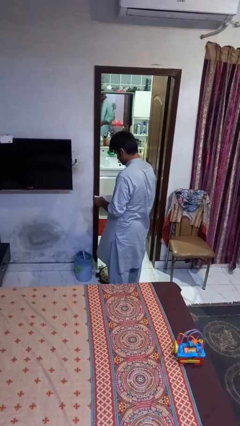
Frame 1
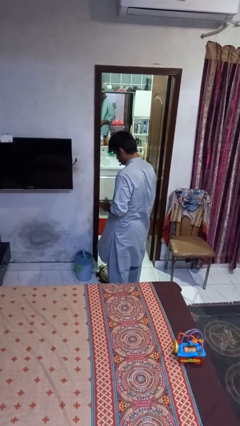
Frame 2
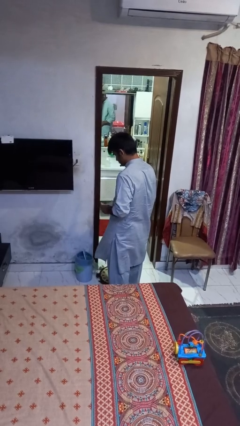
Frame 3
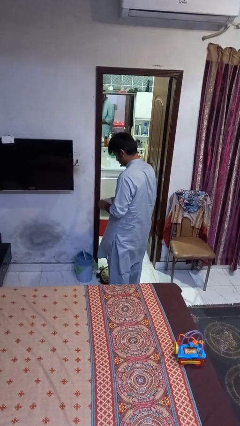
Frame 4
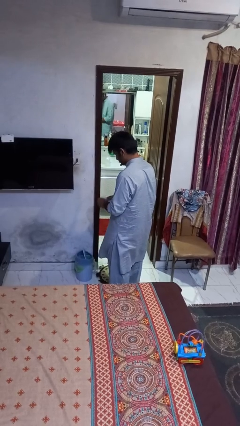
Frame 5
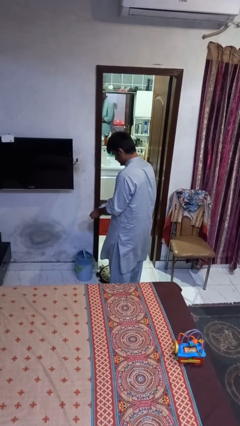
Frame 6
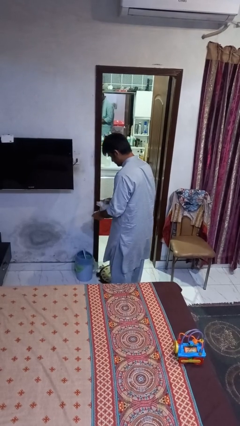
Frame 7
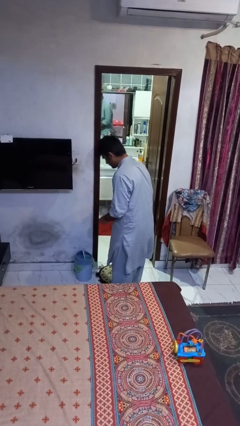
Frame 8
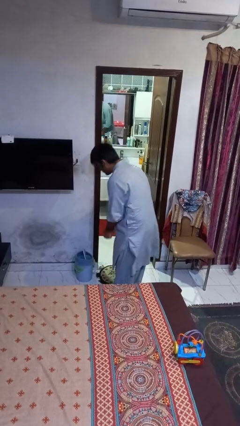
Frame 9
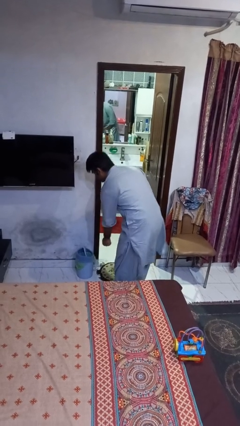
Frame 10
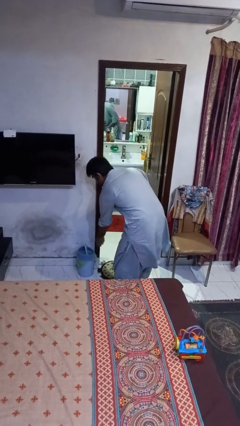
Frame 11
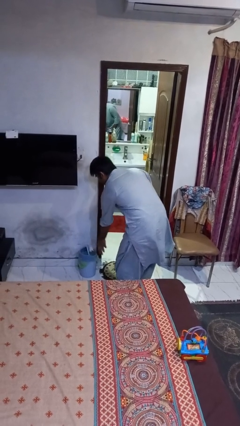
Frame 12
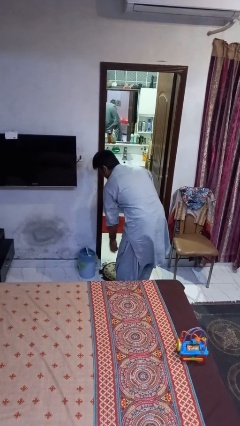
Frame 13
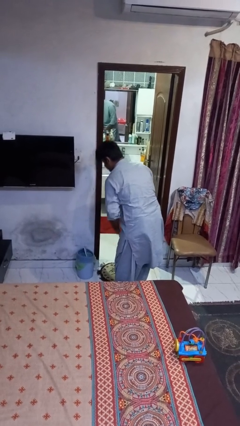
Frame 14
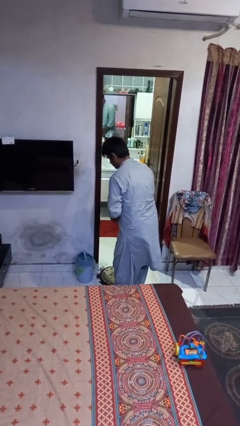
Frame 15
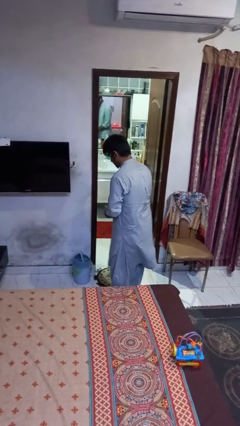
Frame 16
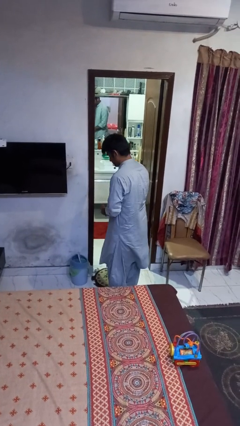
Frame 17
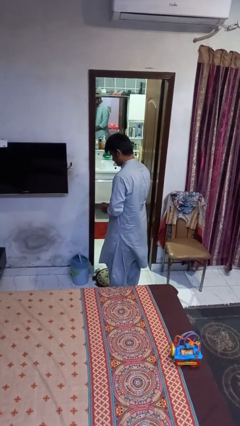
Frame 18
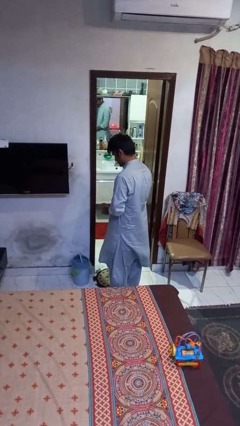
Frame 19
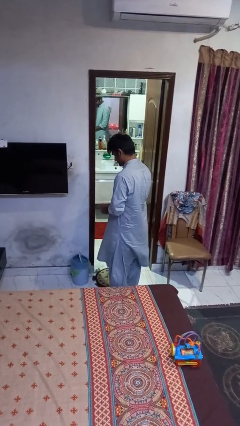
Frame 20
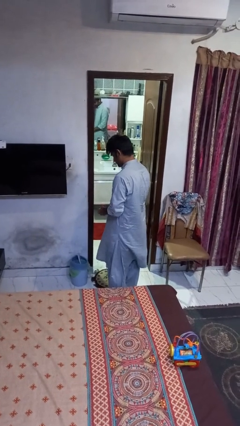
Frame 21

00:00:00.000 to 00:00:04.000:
person discards trash

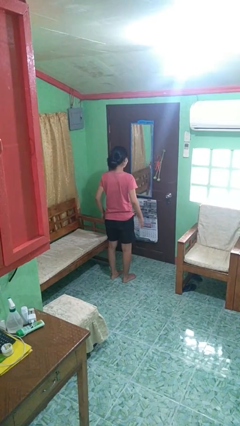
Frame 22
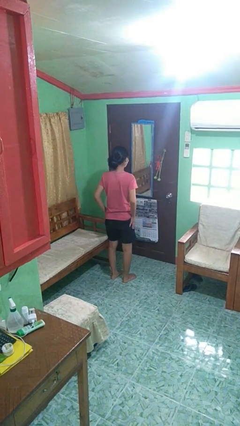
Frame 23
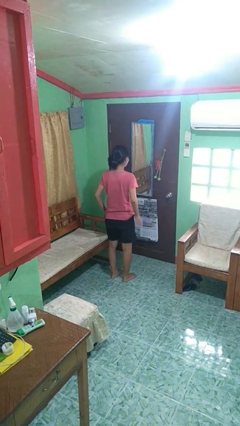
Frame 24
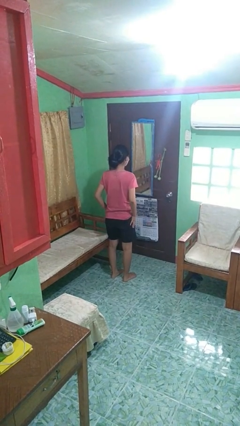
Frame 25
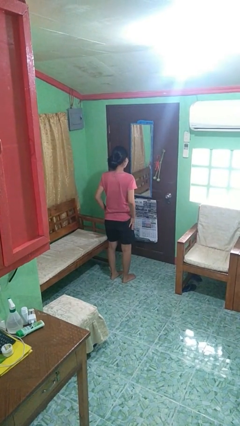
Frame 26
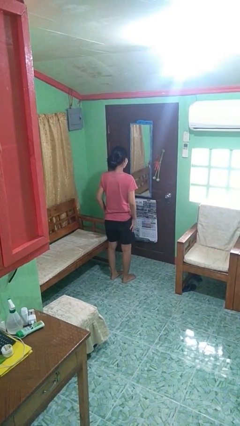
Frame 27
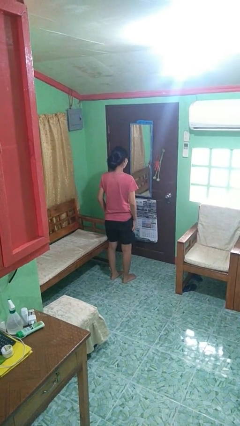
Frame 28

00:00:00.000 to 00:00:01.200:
person slaps hands on thighs

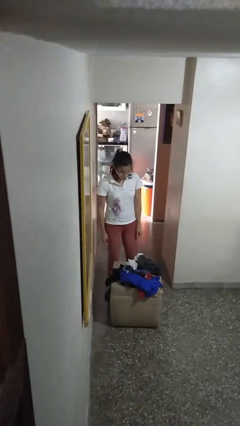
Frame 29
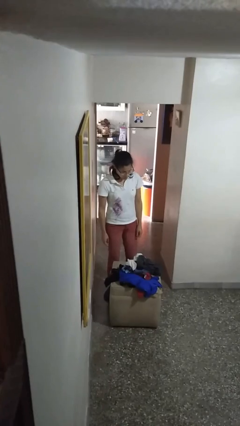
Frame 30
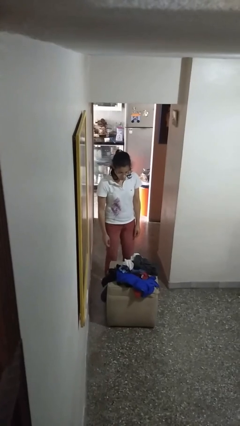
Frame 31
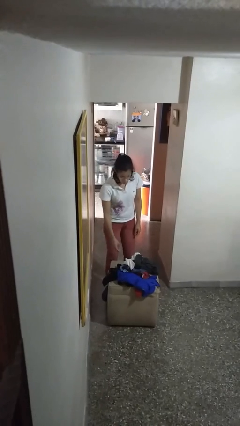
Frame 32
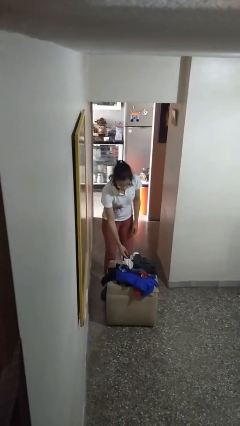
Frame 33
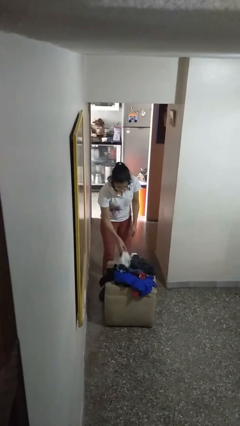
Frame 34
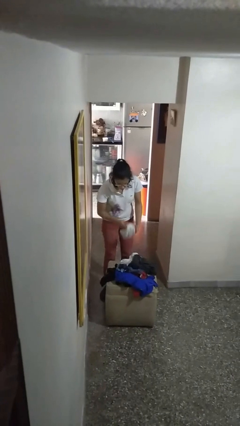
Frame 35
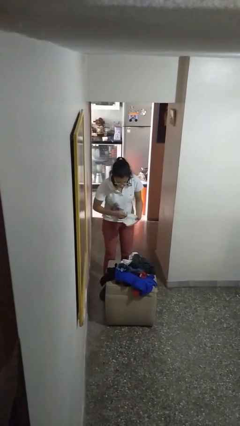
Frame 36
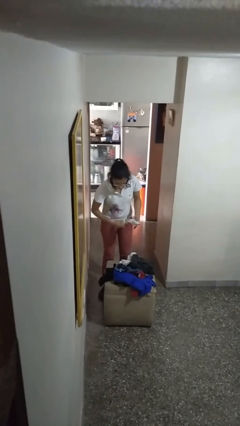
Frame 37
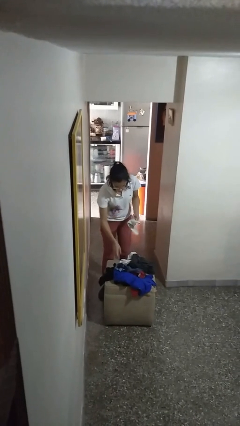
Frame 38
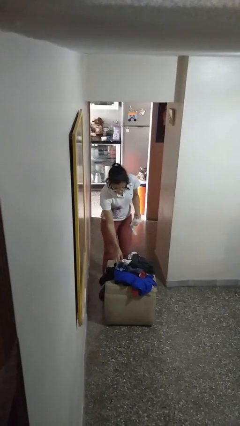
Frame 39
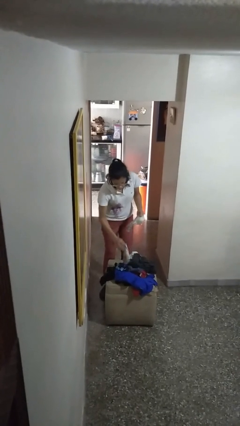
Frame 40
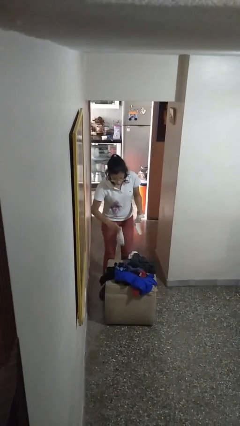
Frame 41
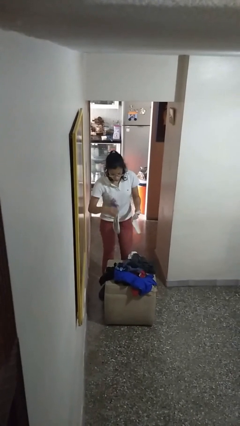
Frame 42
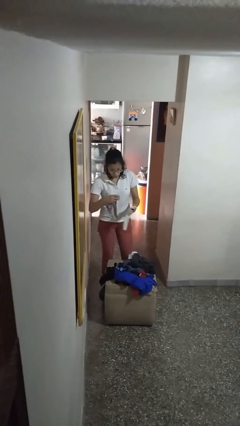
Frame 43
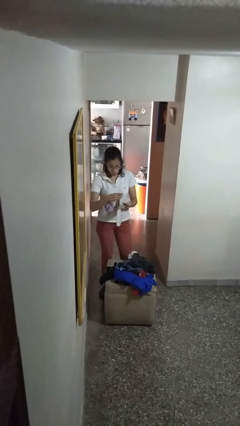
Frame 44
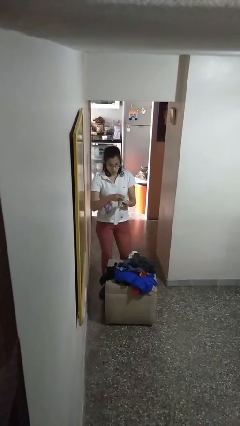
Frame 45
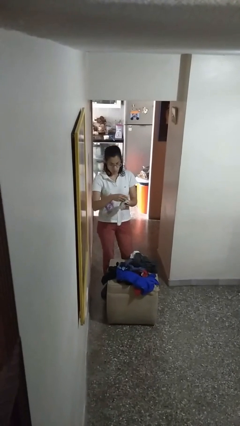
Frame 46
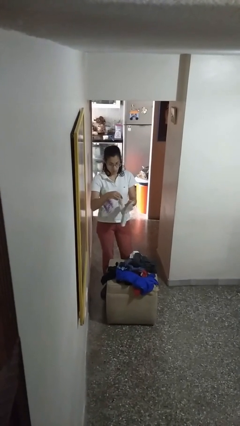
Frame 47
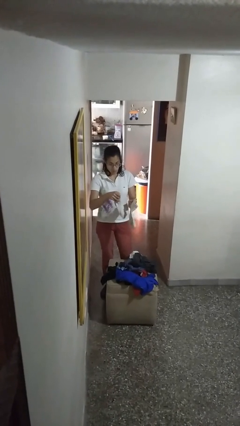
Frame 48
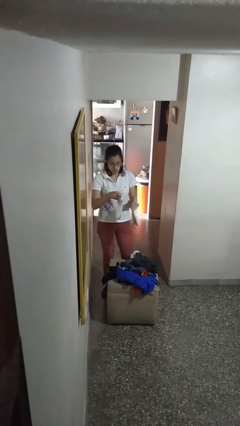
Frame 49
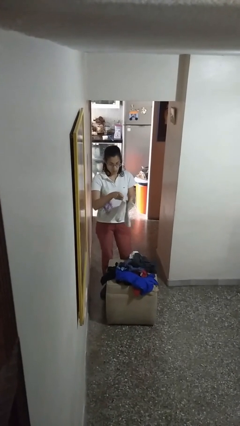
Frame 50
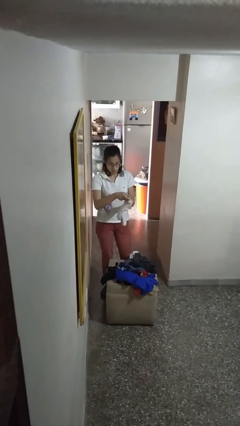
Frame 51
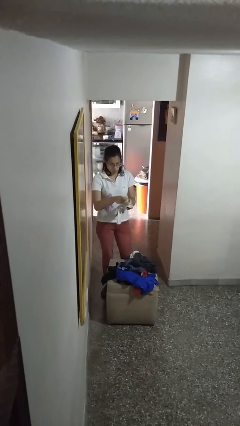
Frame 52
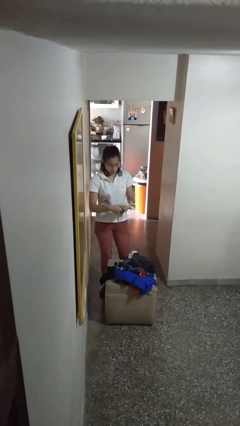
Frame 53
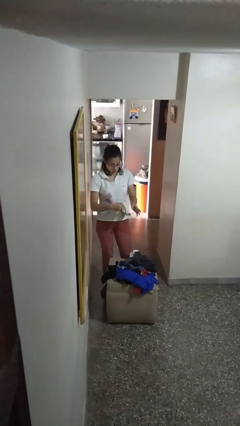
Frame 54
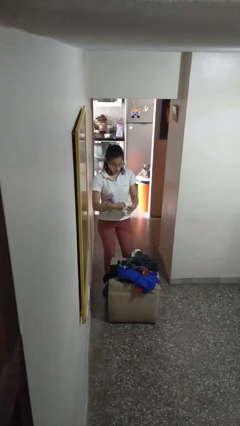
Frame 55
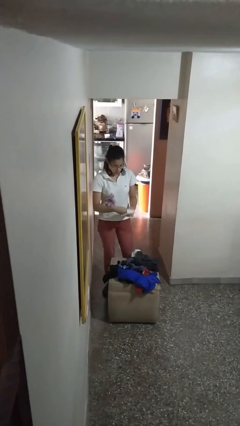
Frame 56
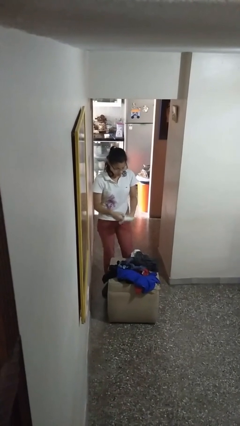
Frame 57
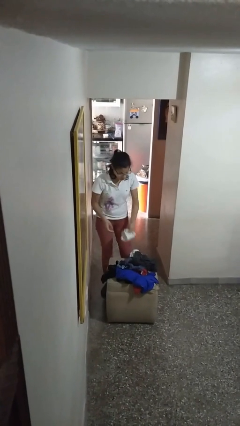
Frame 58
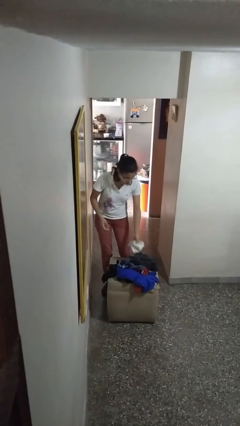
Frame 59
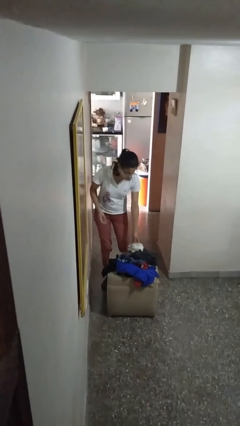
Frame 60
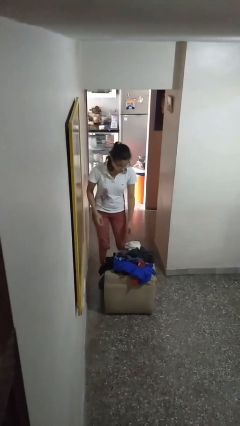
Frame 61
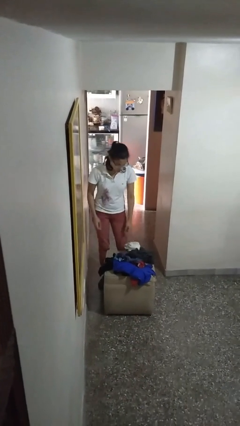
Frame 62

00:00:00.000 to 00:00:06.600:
person folds socks

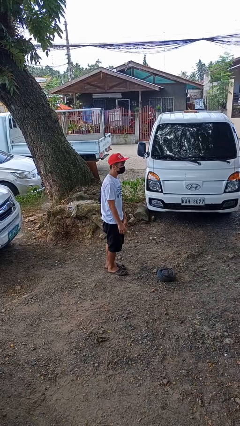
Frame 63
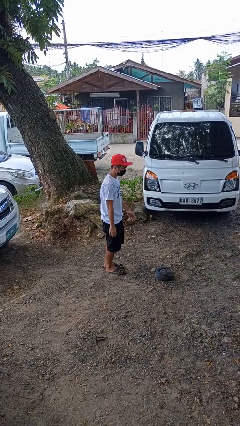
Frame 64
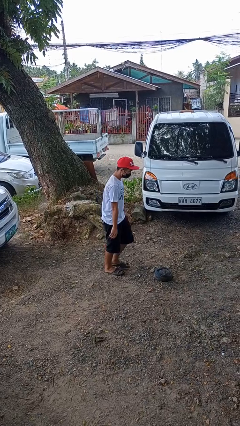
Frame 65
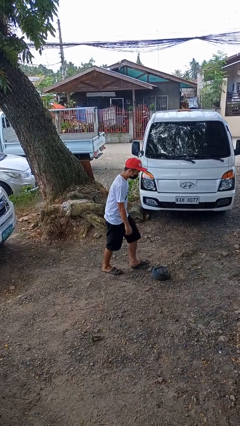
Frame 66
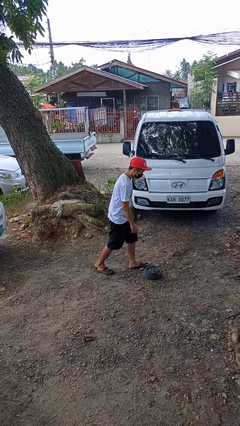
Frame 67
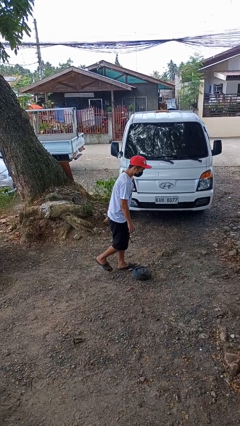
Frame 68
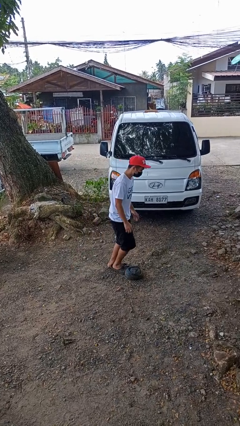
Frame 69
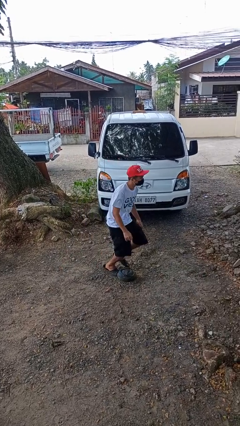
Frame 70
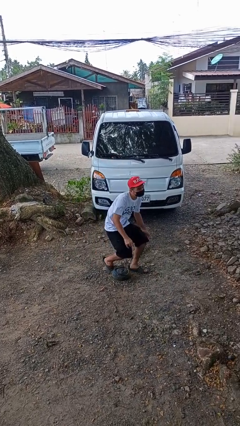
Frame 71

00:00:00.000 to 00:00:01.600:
person trips on object on floor

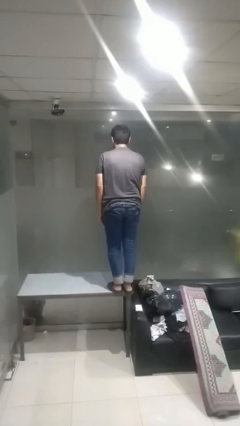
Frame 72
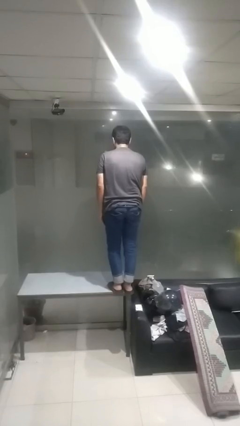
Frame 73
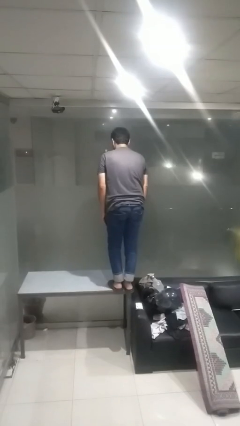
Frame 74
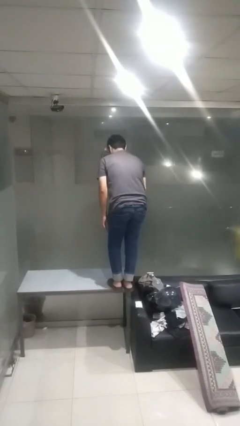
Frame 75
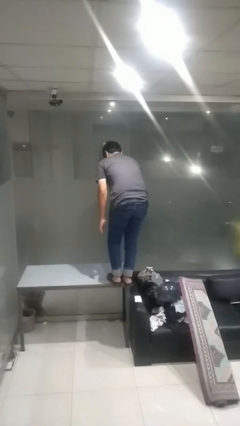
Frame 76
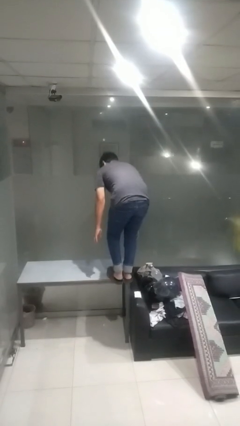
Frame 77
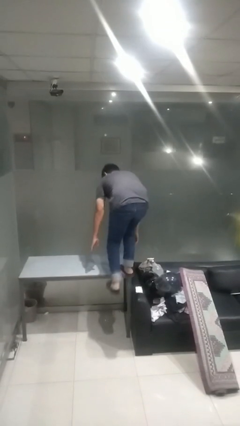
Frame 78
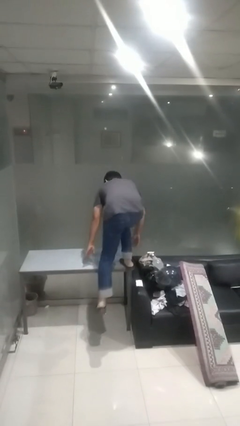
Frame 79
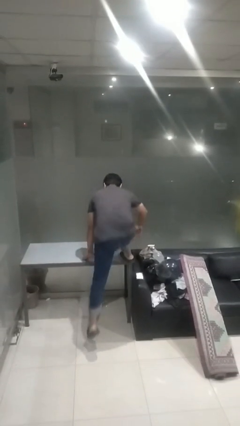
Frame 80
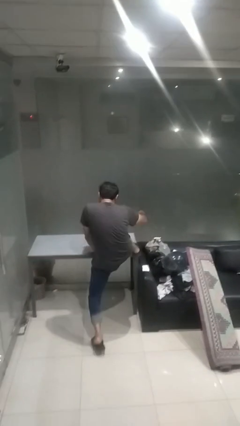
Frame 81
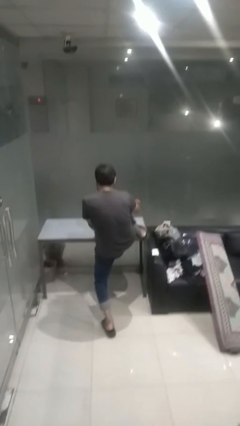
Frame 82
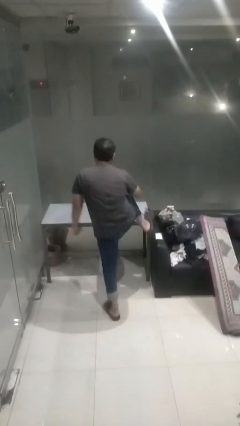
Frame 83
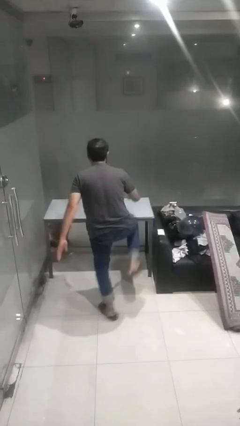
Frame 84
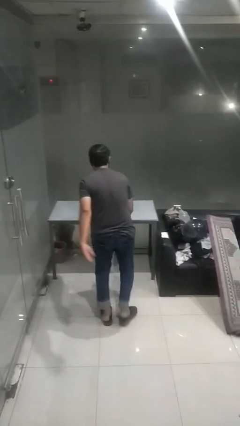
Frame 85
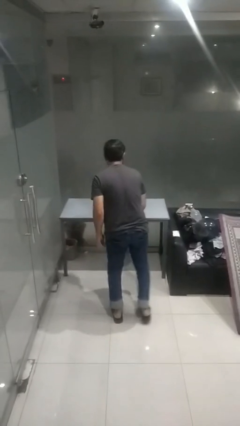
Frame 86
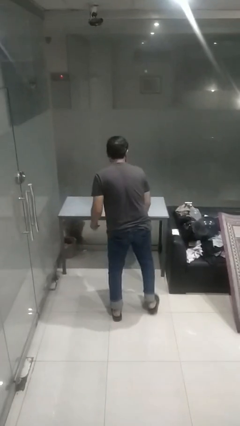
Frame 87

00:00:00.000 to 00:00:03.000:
person climbs off table

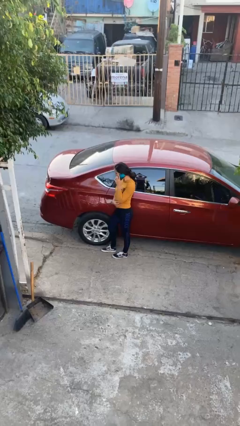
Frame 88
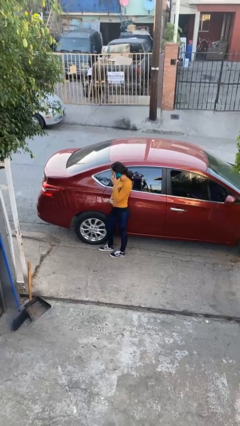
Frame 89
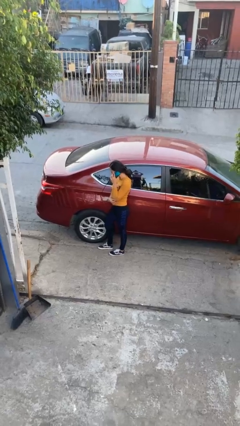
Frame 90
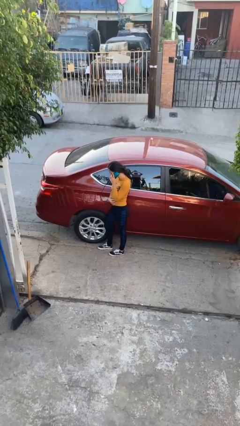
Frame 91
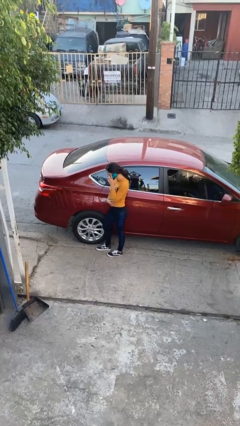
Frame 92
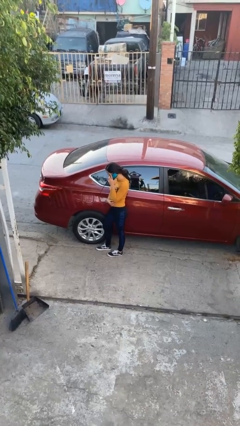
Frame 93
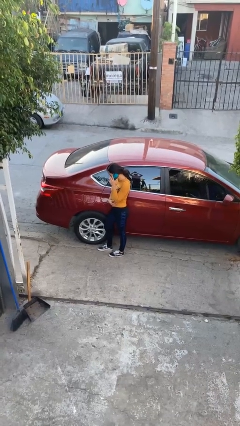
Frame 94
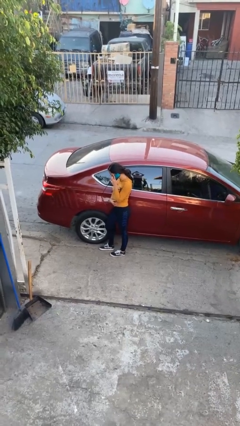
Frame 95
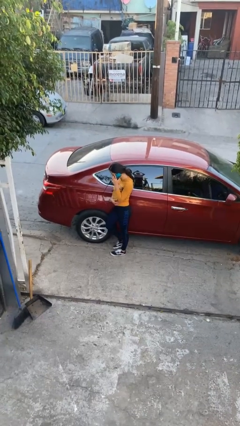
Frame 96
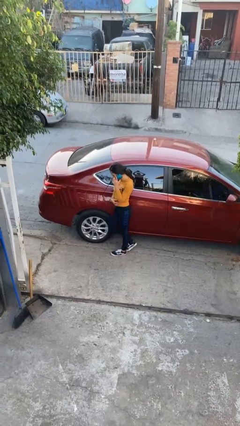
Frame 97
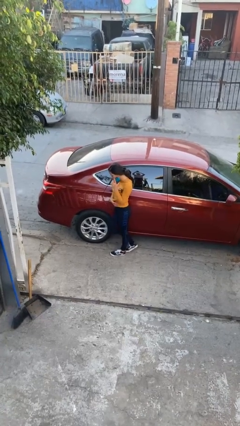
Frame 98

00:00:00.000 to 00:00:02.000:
person leans against car
